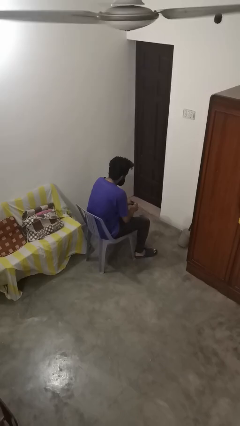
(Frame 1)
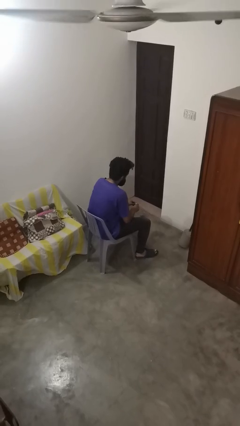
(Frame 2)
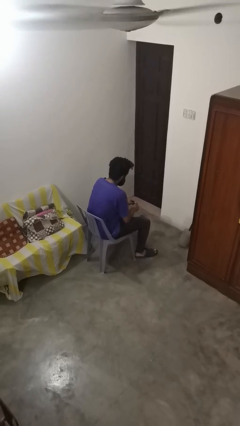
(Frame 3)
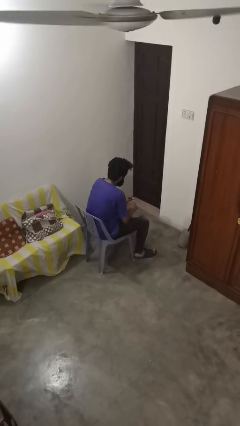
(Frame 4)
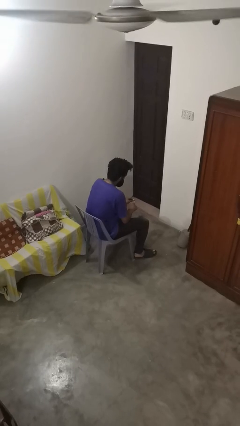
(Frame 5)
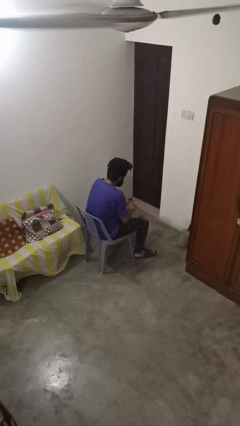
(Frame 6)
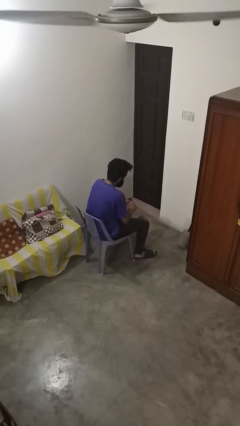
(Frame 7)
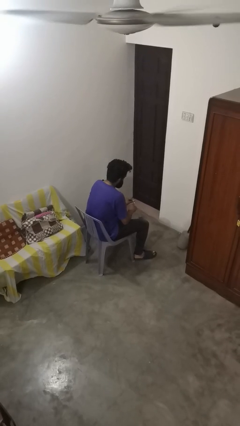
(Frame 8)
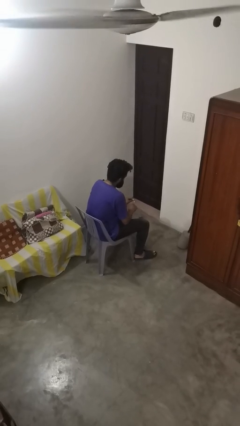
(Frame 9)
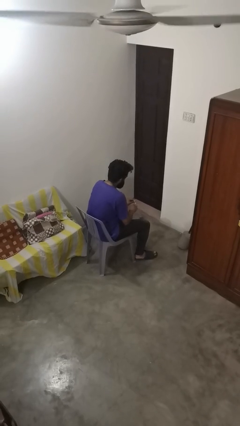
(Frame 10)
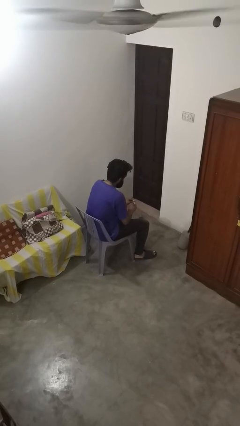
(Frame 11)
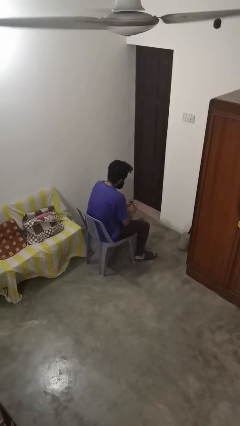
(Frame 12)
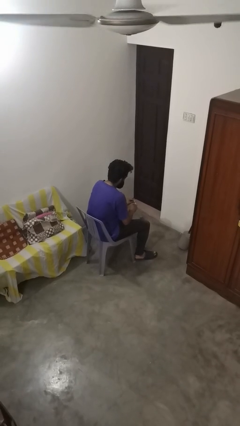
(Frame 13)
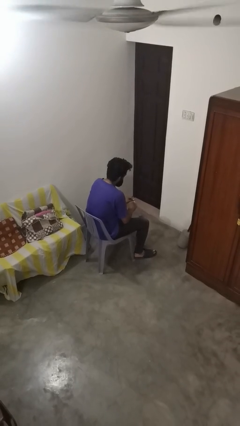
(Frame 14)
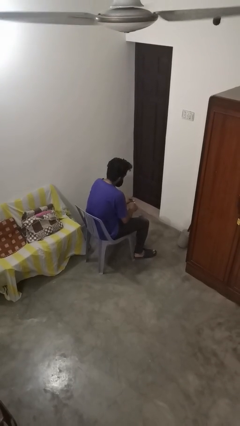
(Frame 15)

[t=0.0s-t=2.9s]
person paints fingernails

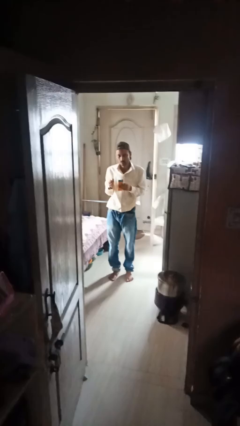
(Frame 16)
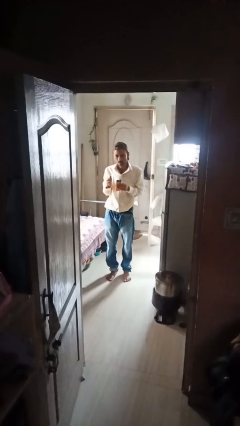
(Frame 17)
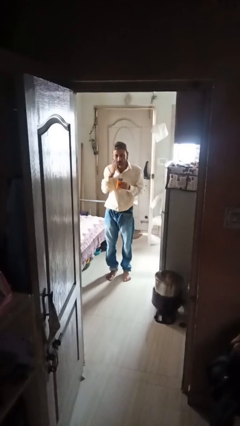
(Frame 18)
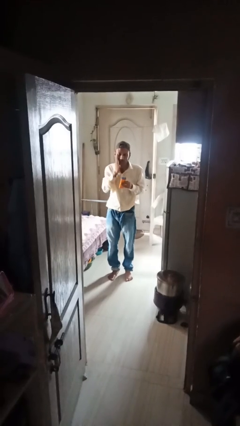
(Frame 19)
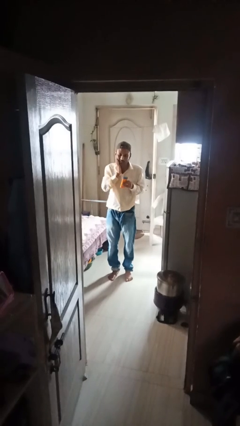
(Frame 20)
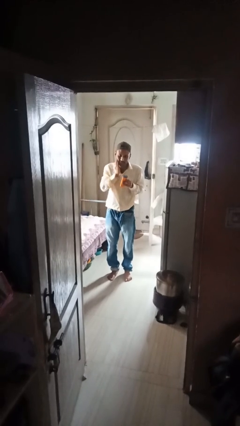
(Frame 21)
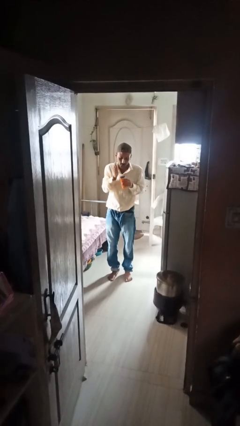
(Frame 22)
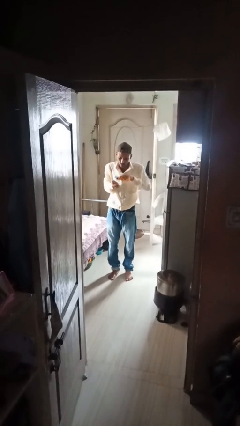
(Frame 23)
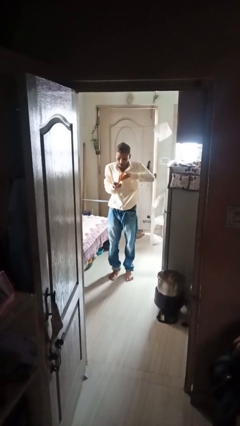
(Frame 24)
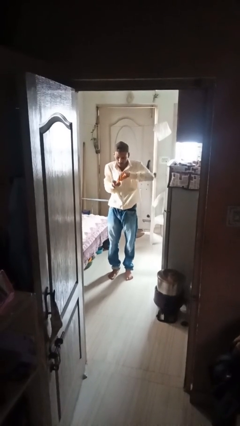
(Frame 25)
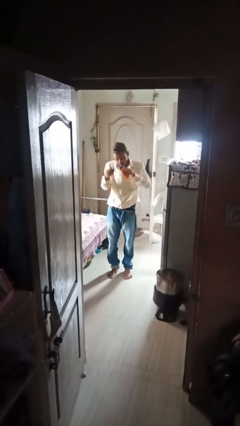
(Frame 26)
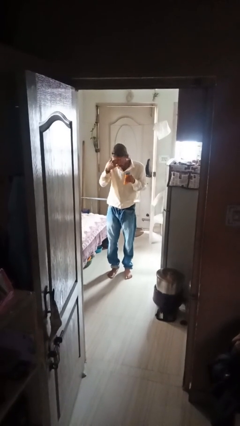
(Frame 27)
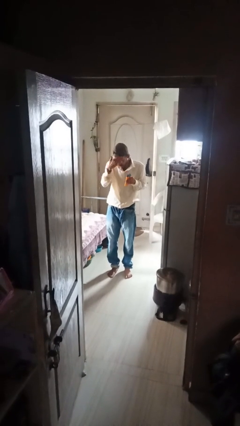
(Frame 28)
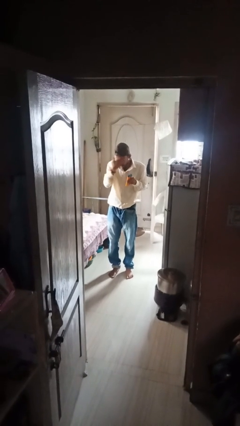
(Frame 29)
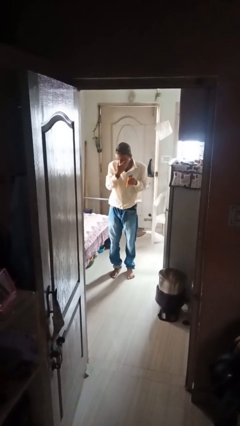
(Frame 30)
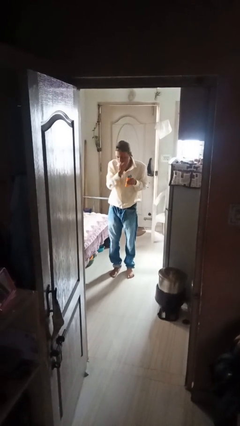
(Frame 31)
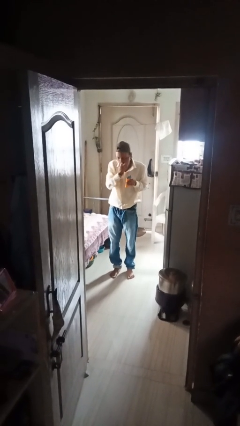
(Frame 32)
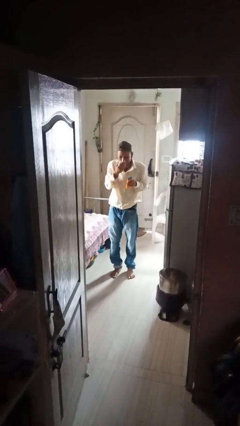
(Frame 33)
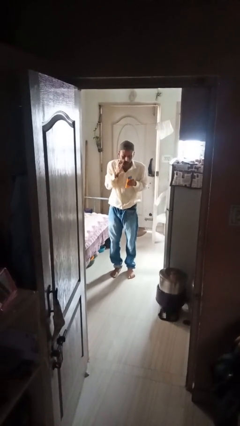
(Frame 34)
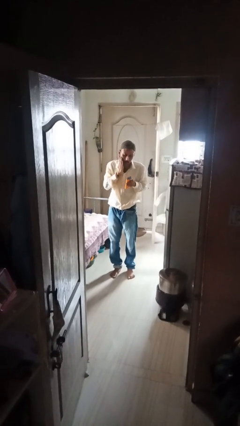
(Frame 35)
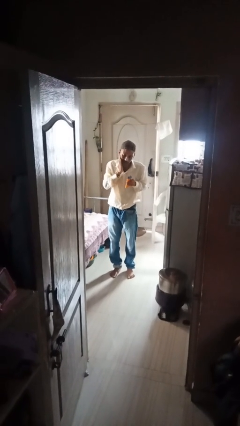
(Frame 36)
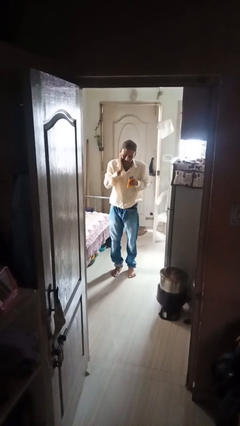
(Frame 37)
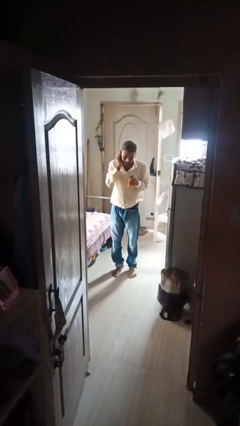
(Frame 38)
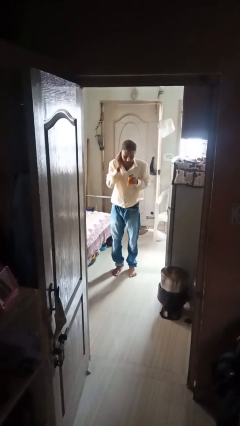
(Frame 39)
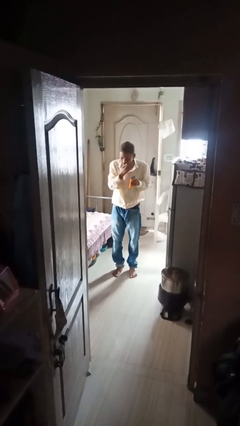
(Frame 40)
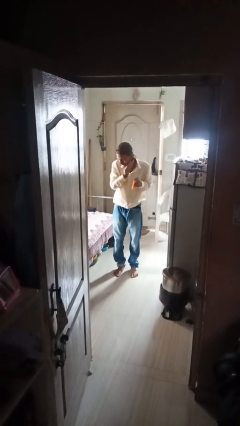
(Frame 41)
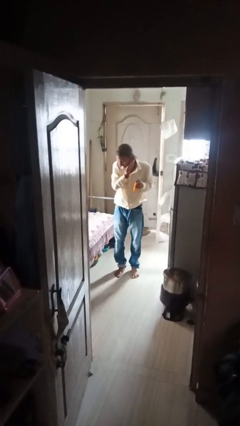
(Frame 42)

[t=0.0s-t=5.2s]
person applies sunscreen

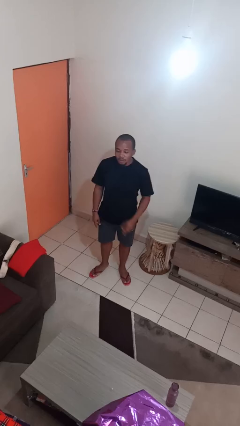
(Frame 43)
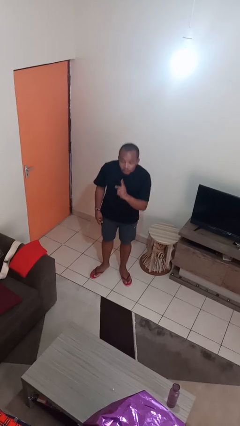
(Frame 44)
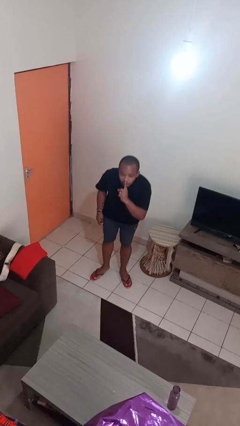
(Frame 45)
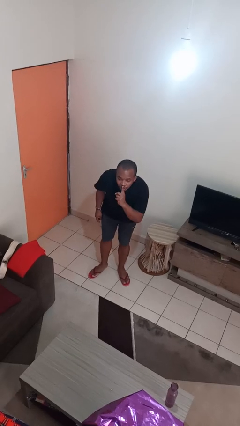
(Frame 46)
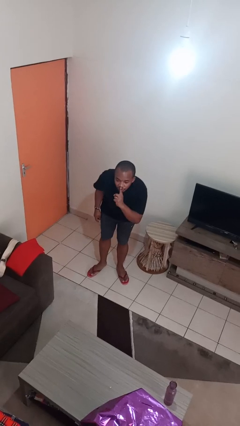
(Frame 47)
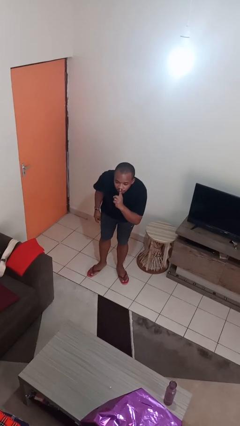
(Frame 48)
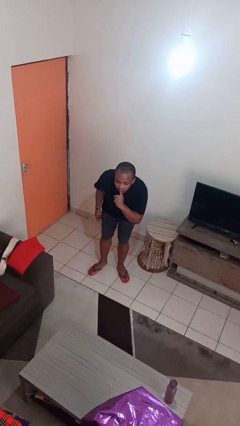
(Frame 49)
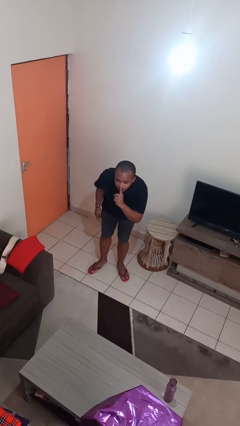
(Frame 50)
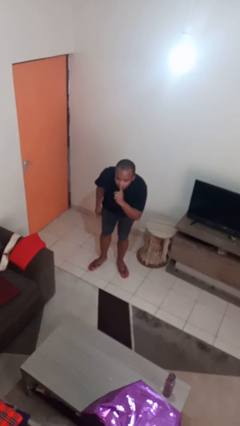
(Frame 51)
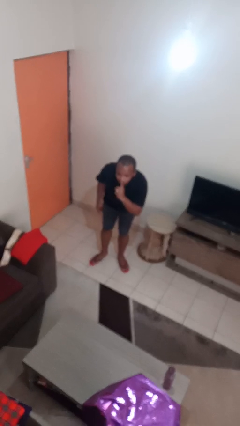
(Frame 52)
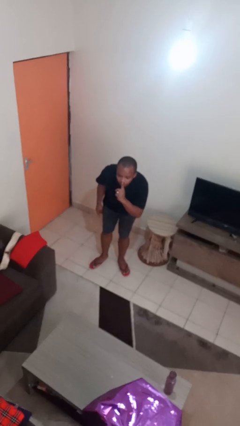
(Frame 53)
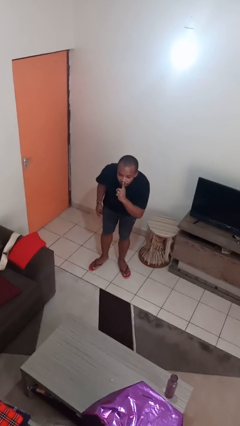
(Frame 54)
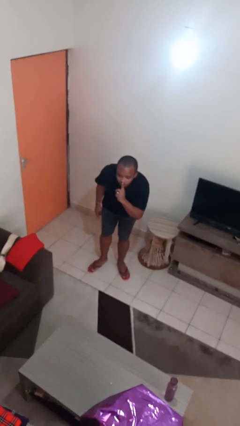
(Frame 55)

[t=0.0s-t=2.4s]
person gestures be quiet

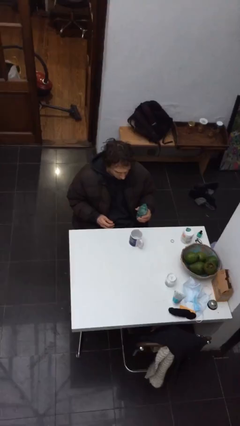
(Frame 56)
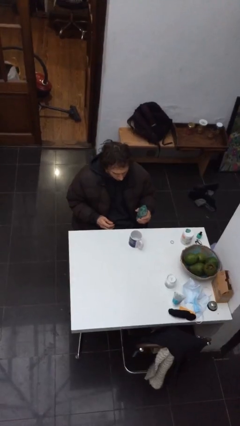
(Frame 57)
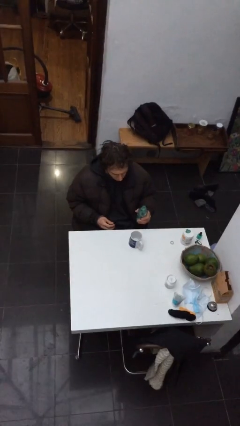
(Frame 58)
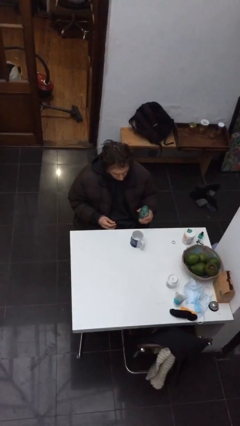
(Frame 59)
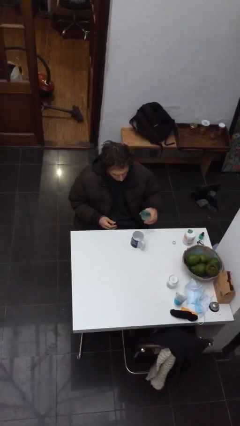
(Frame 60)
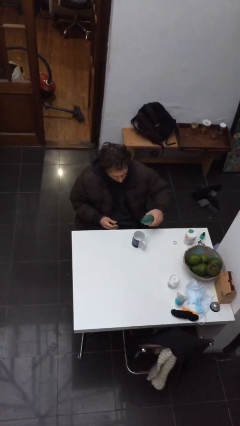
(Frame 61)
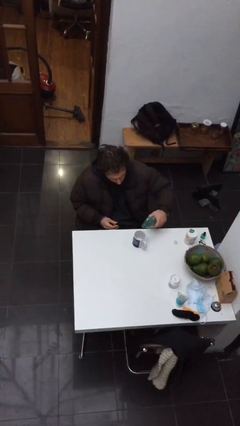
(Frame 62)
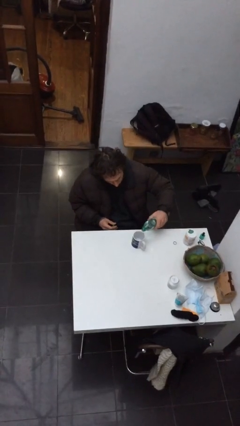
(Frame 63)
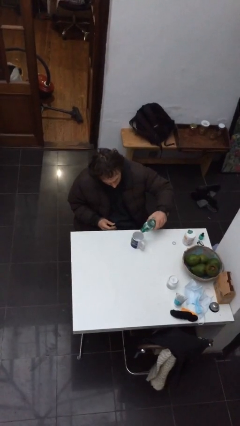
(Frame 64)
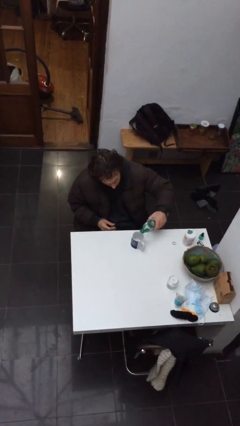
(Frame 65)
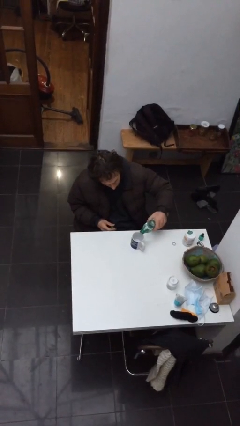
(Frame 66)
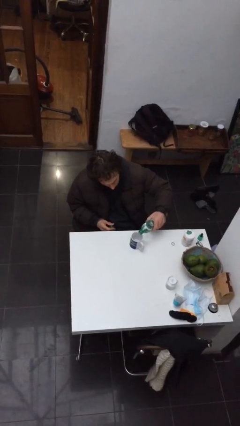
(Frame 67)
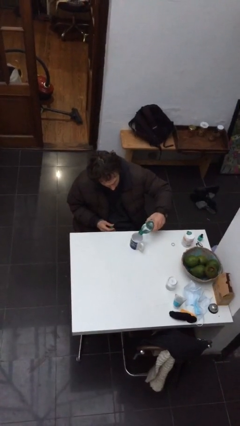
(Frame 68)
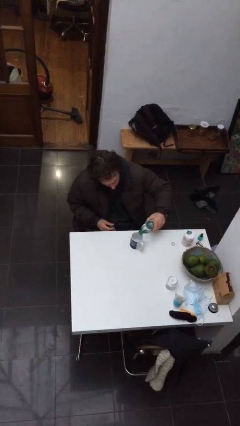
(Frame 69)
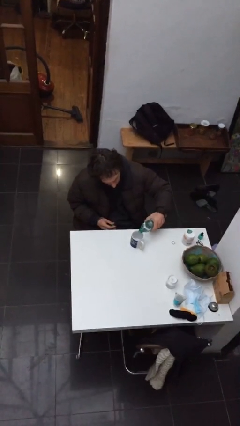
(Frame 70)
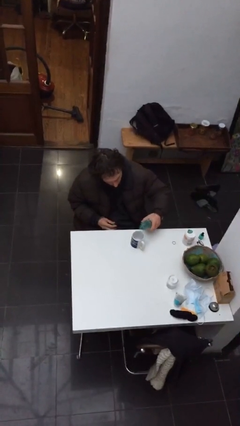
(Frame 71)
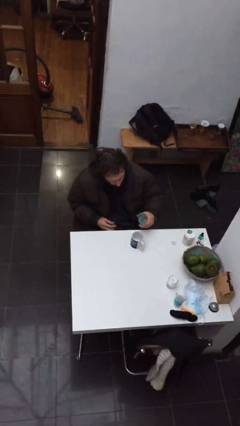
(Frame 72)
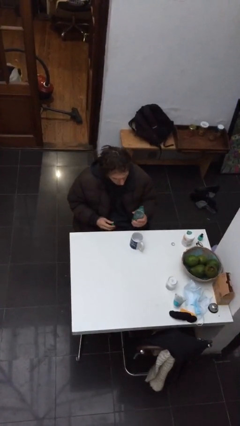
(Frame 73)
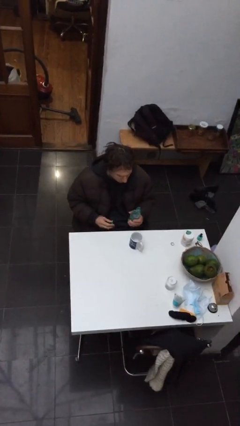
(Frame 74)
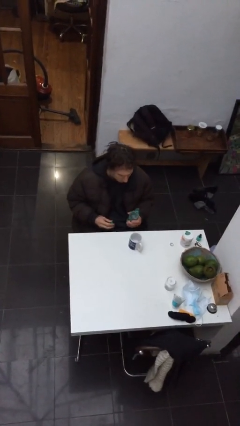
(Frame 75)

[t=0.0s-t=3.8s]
person pours liquid into cup

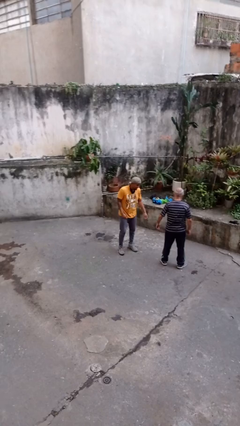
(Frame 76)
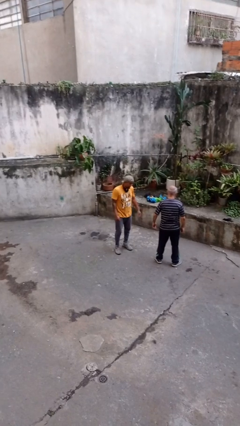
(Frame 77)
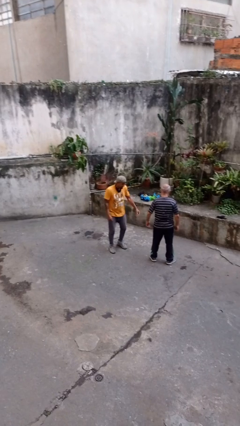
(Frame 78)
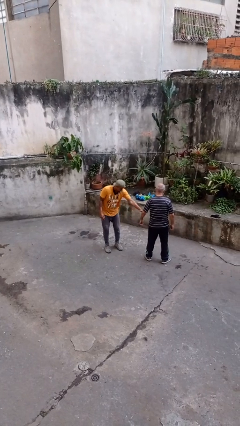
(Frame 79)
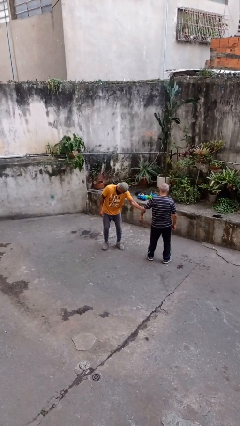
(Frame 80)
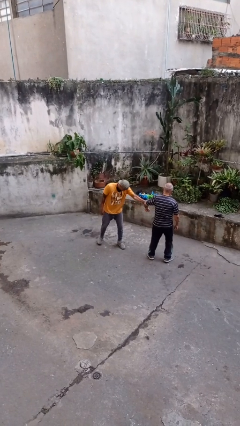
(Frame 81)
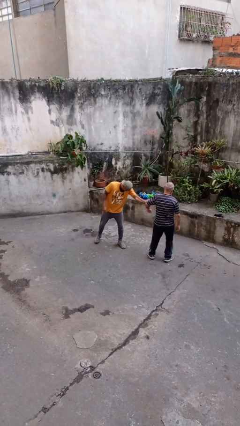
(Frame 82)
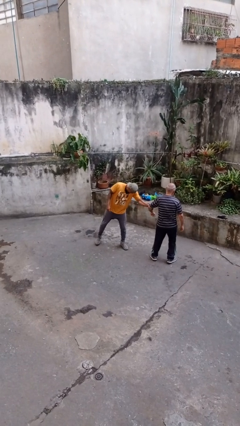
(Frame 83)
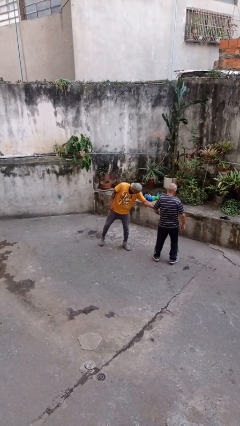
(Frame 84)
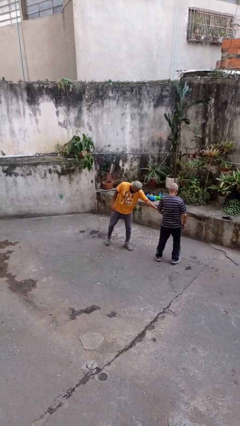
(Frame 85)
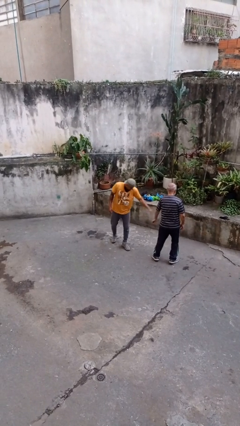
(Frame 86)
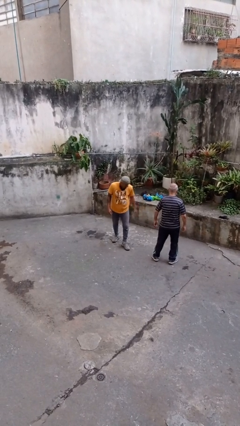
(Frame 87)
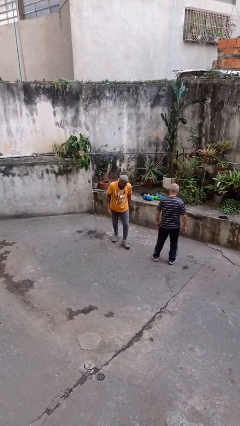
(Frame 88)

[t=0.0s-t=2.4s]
person grabs person by forearm

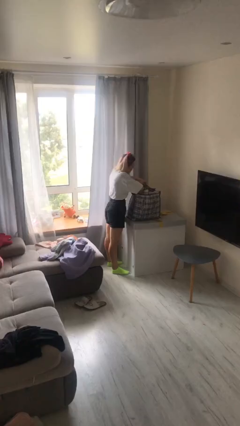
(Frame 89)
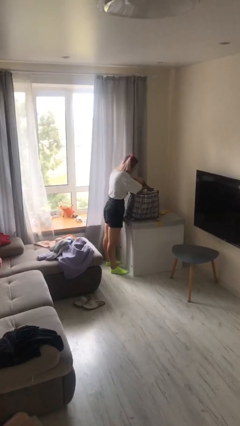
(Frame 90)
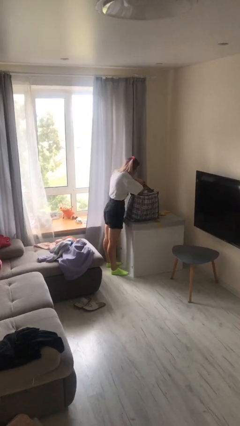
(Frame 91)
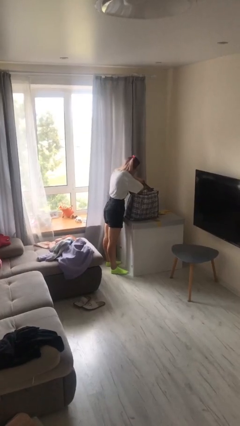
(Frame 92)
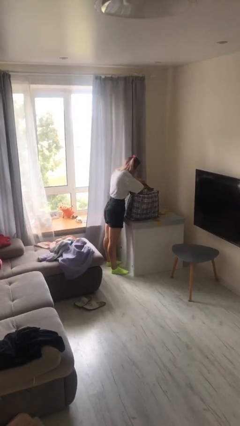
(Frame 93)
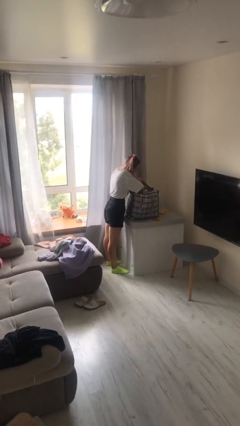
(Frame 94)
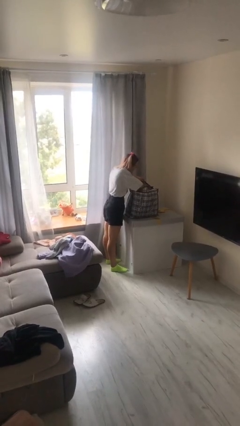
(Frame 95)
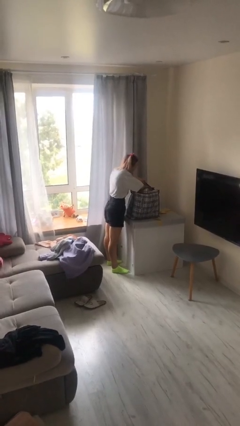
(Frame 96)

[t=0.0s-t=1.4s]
person searches in bag
